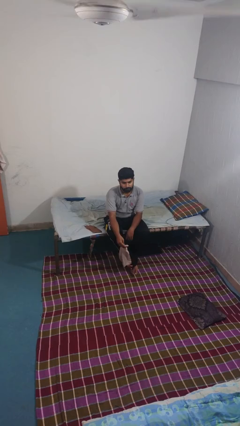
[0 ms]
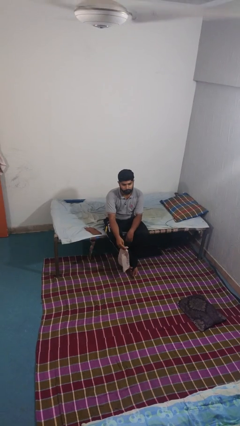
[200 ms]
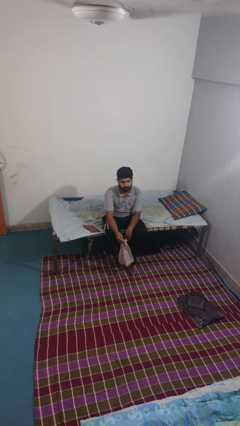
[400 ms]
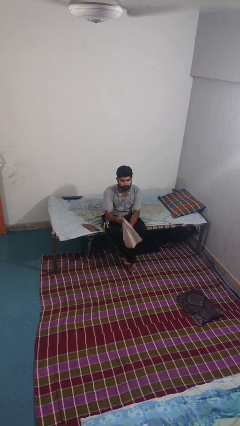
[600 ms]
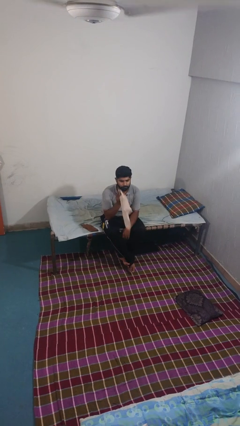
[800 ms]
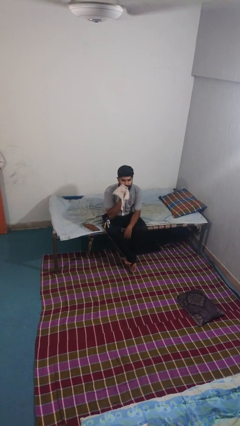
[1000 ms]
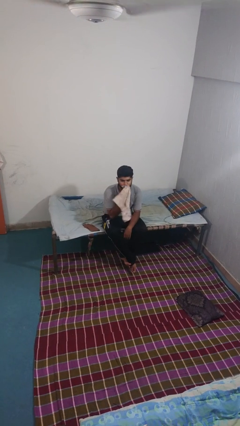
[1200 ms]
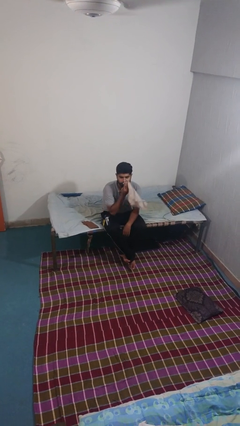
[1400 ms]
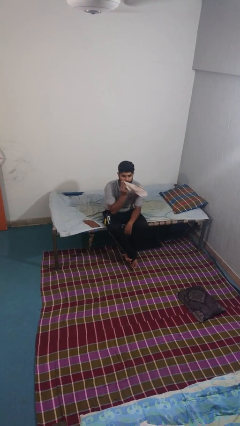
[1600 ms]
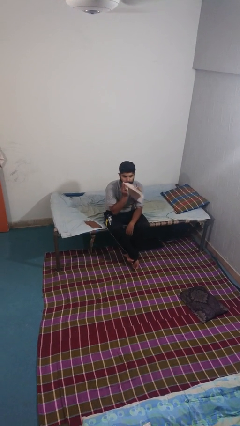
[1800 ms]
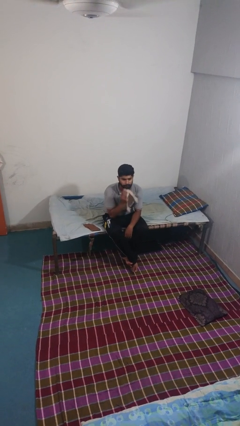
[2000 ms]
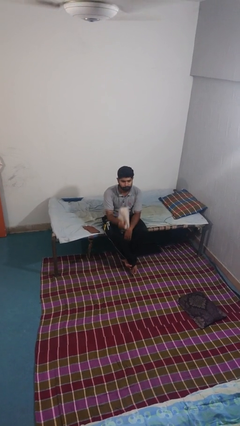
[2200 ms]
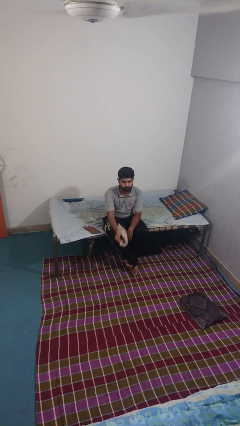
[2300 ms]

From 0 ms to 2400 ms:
person wipes mouth with napkin

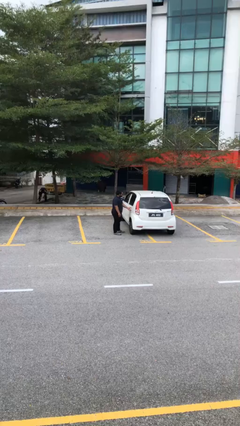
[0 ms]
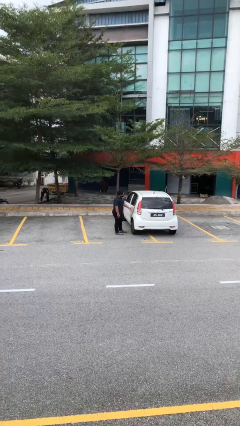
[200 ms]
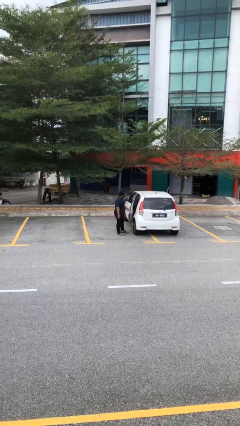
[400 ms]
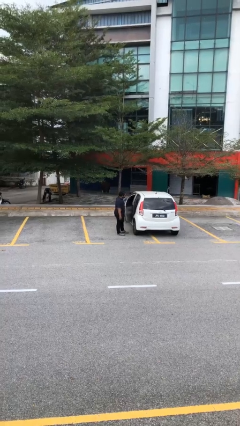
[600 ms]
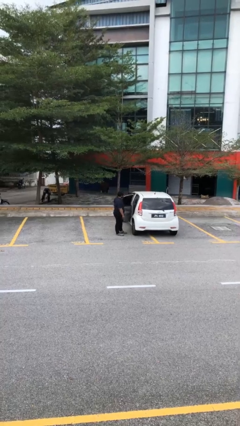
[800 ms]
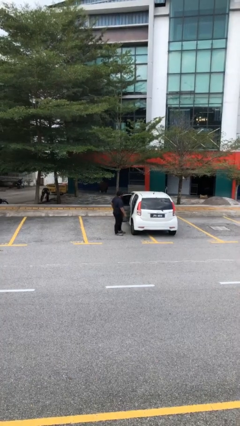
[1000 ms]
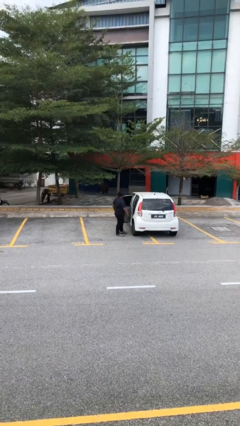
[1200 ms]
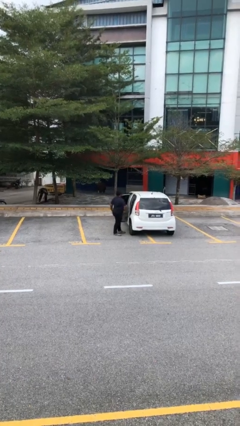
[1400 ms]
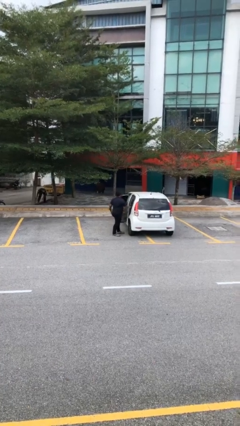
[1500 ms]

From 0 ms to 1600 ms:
person opens car door

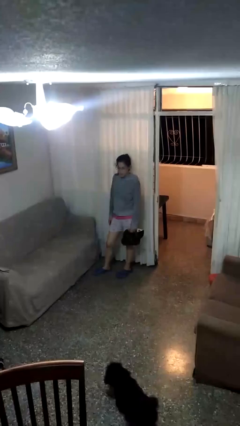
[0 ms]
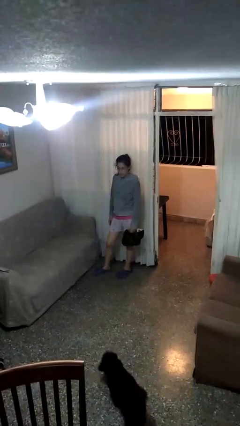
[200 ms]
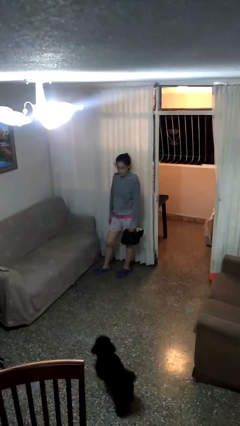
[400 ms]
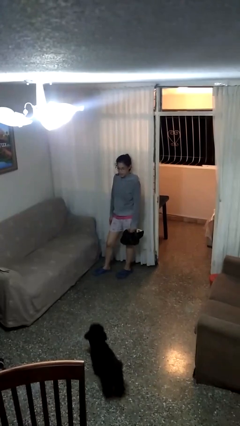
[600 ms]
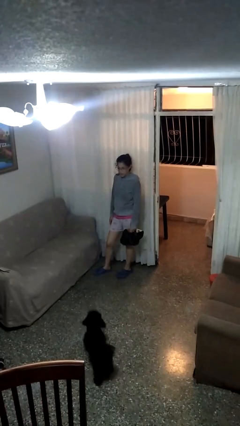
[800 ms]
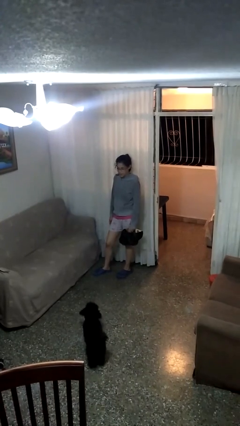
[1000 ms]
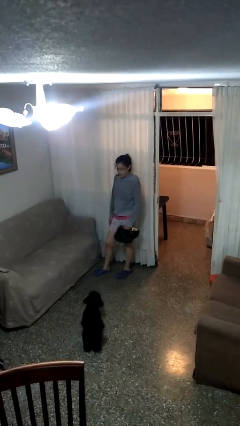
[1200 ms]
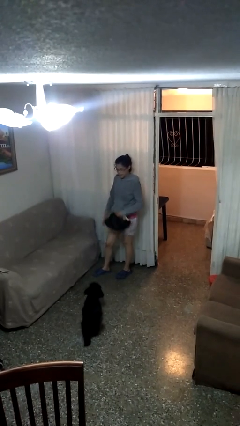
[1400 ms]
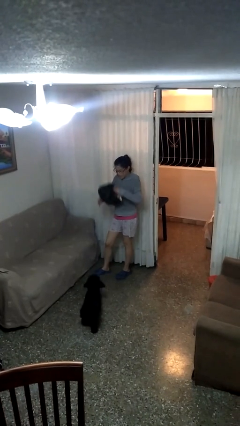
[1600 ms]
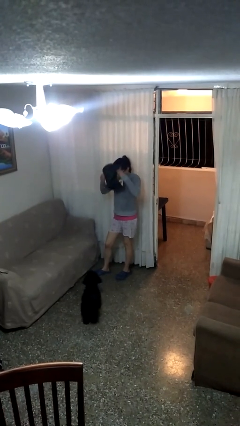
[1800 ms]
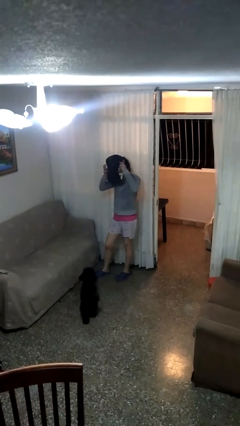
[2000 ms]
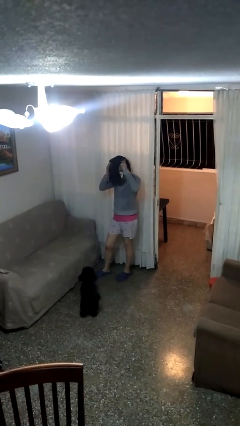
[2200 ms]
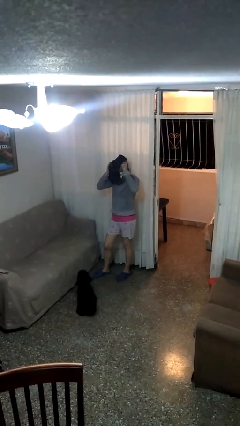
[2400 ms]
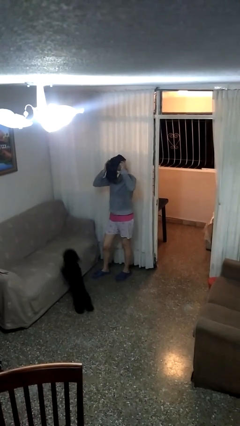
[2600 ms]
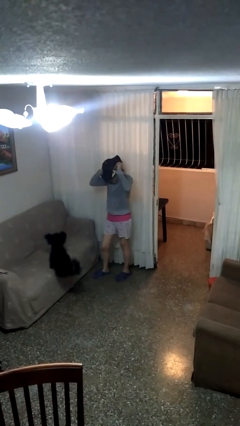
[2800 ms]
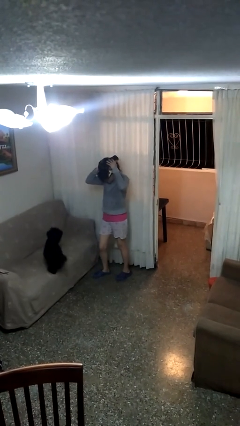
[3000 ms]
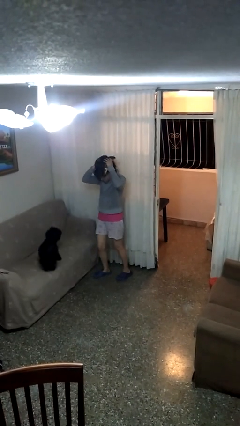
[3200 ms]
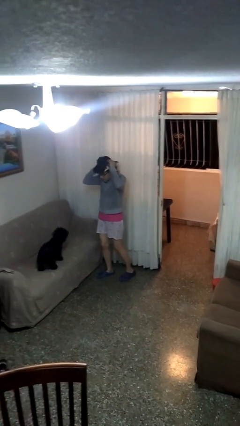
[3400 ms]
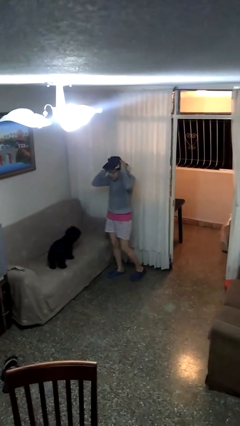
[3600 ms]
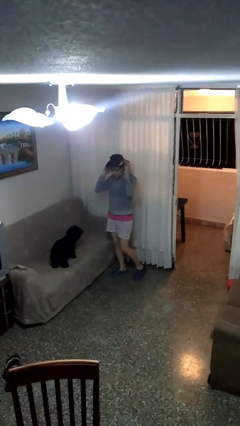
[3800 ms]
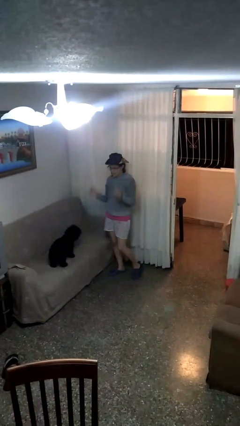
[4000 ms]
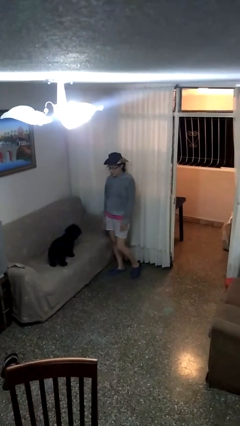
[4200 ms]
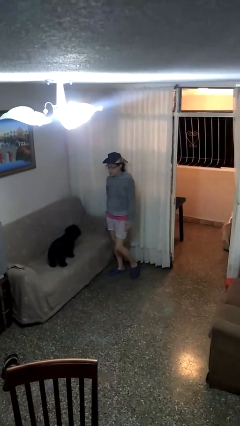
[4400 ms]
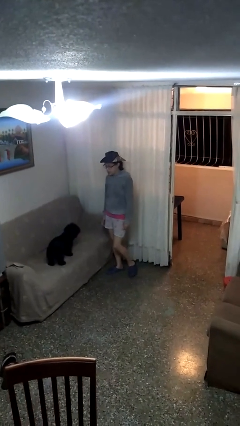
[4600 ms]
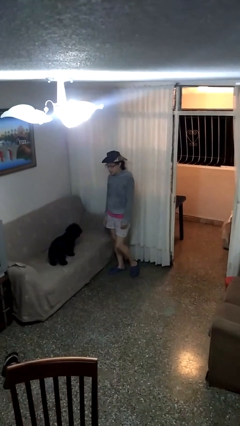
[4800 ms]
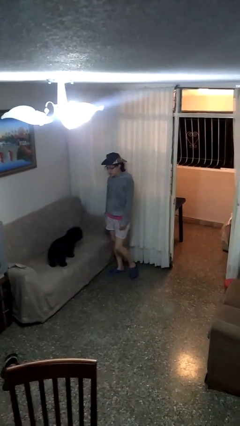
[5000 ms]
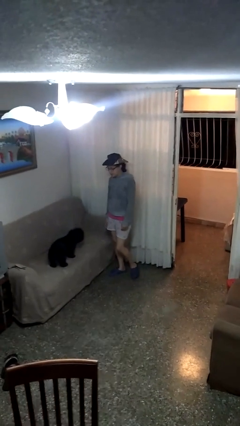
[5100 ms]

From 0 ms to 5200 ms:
person puts on hat

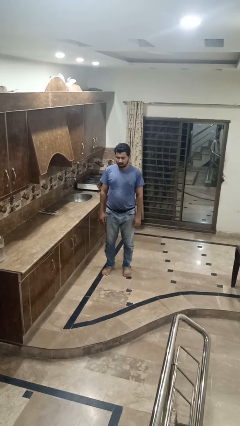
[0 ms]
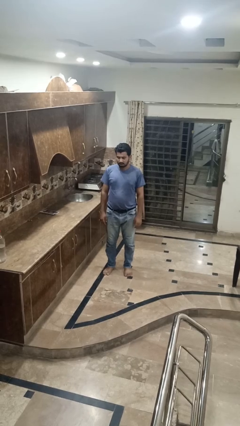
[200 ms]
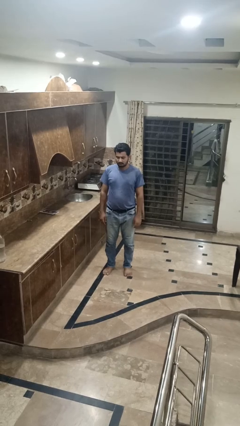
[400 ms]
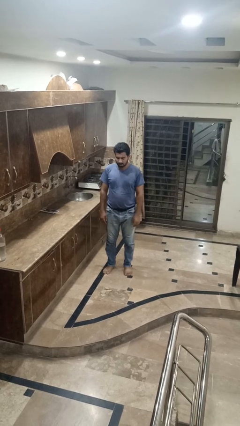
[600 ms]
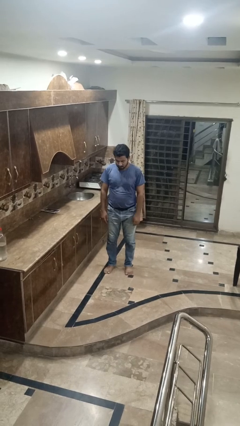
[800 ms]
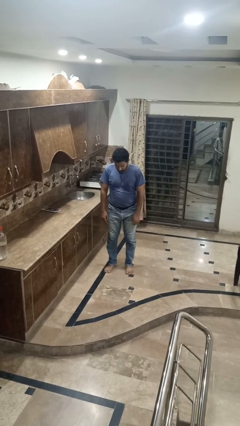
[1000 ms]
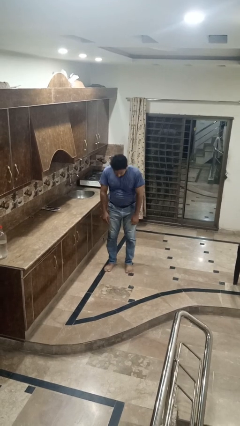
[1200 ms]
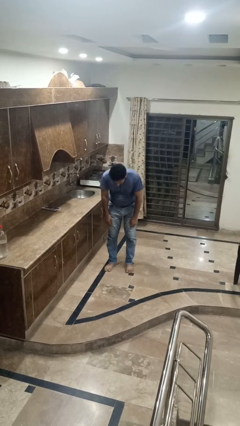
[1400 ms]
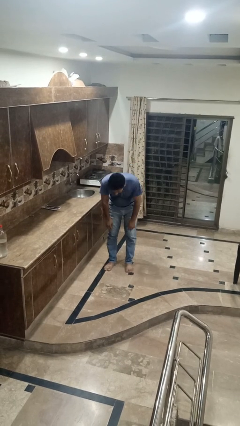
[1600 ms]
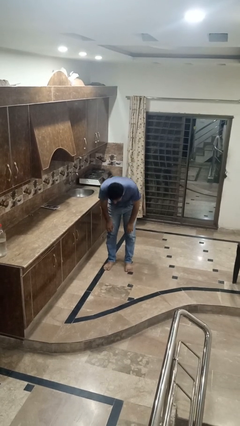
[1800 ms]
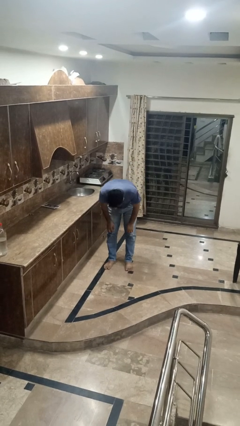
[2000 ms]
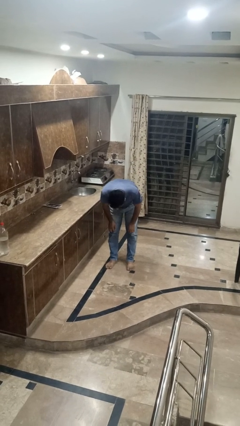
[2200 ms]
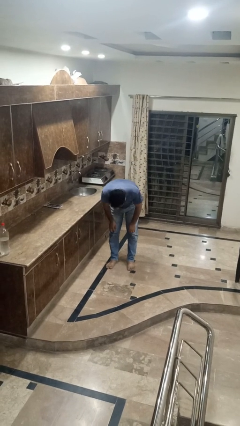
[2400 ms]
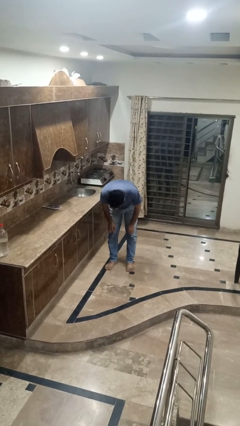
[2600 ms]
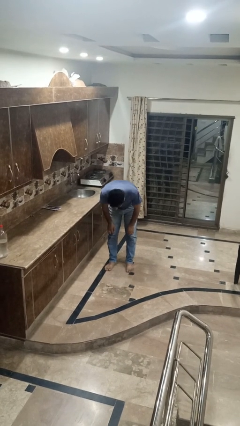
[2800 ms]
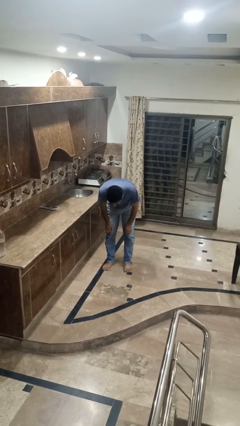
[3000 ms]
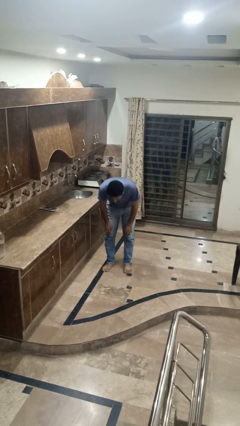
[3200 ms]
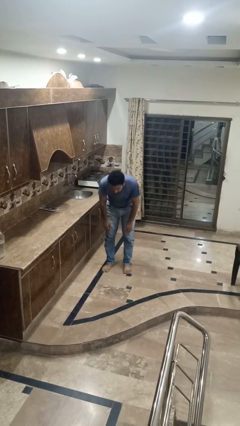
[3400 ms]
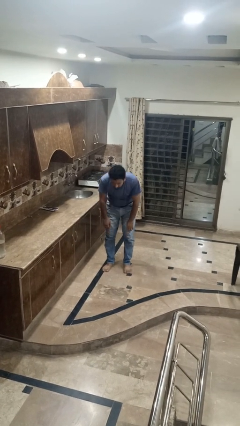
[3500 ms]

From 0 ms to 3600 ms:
person bows

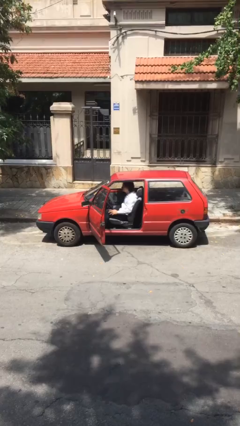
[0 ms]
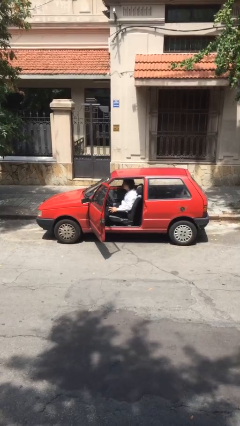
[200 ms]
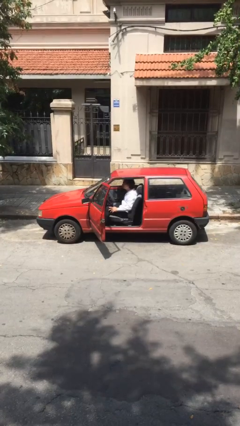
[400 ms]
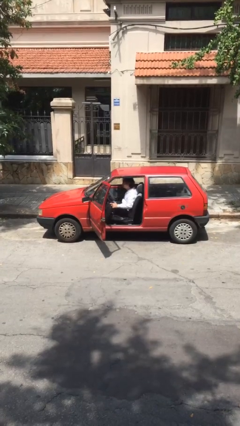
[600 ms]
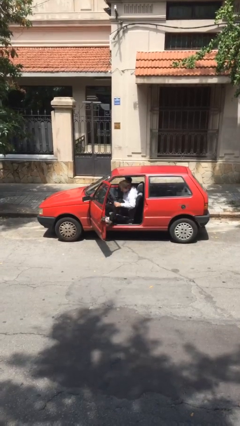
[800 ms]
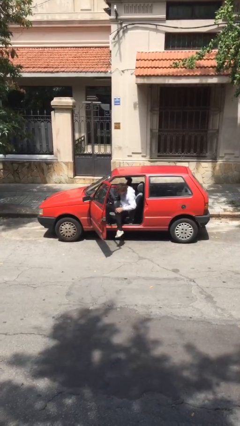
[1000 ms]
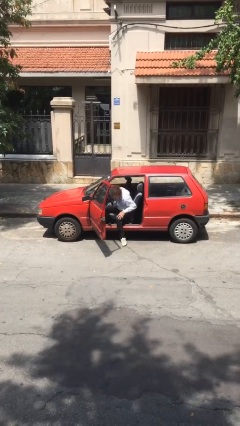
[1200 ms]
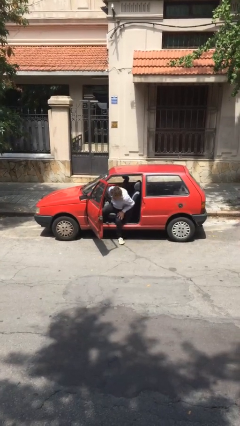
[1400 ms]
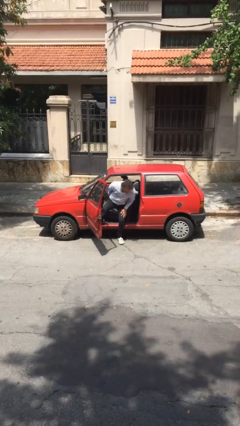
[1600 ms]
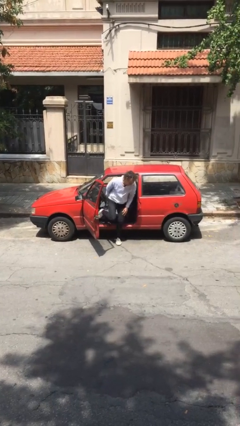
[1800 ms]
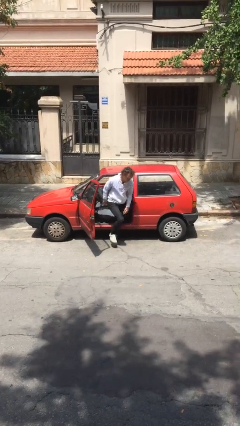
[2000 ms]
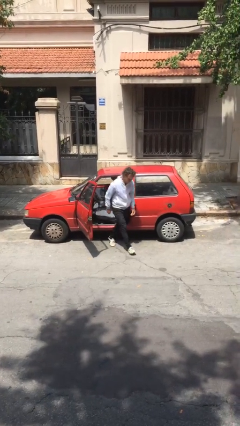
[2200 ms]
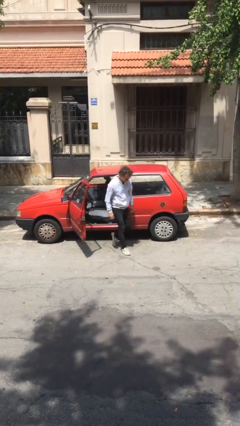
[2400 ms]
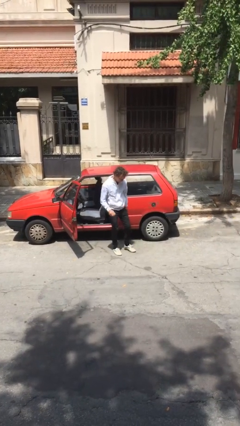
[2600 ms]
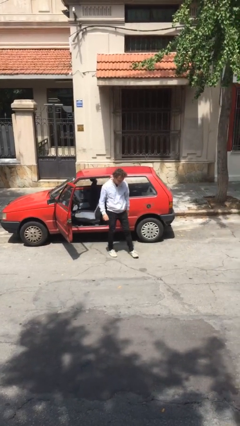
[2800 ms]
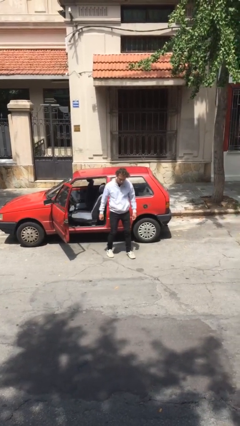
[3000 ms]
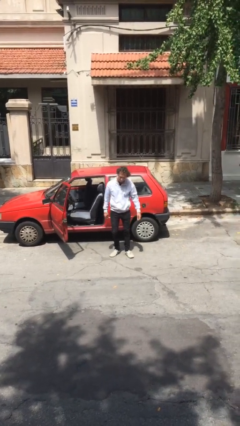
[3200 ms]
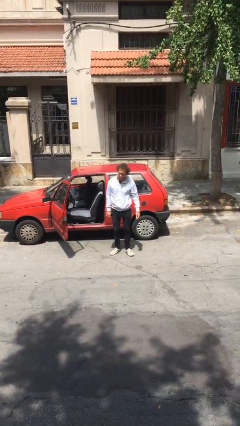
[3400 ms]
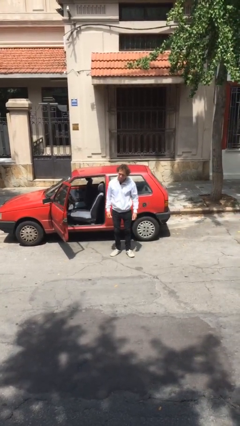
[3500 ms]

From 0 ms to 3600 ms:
person exits car

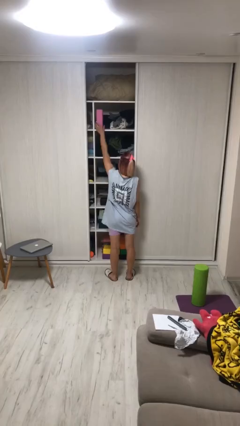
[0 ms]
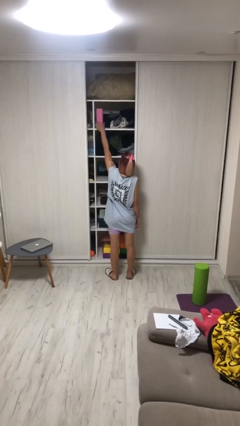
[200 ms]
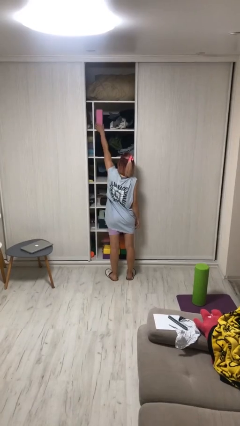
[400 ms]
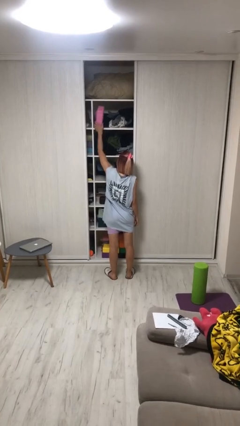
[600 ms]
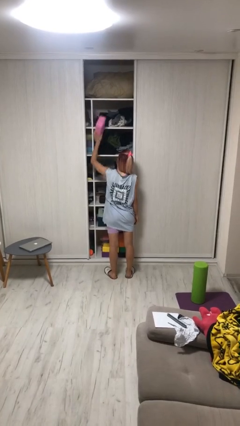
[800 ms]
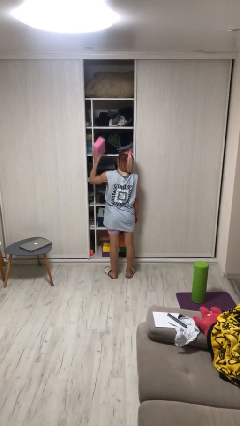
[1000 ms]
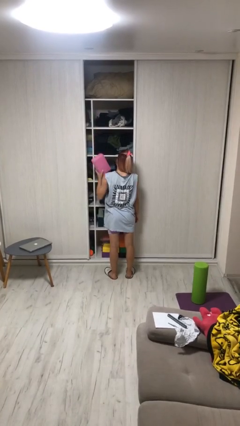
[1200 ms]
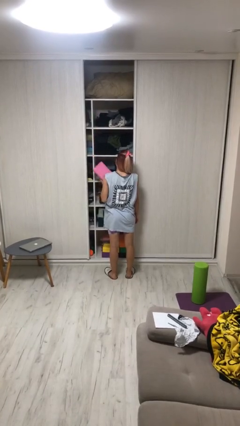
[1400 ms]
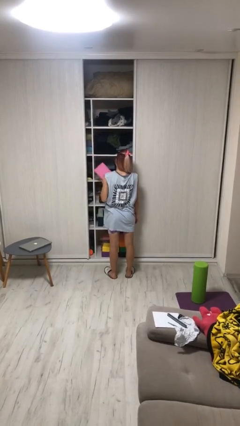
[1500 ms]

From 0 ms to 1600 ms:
person picks up object from shelf
